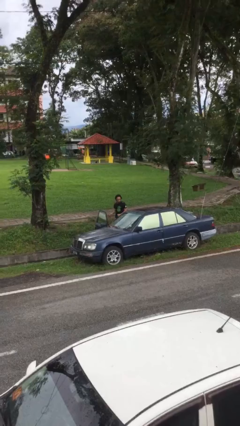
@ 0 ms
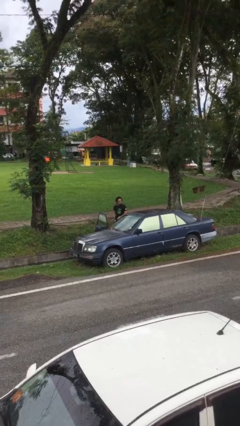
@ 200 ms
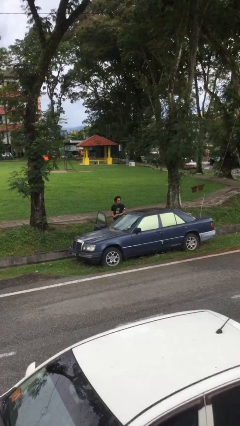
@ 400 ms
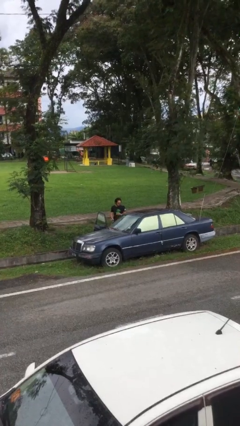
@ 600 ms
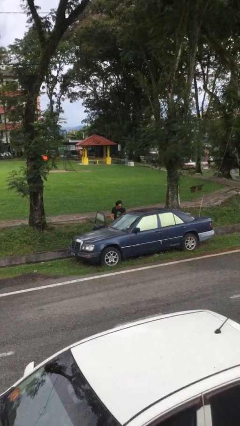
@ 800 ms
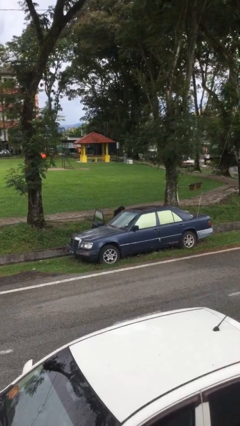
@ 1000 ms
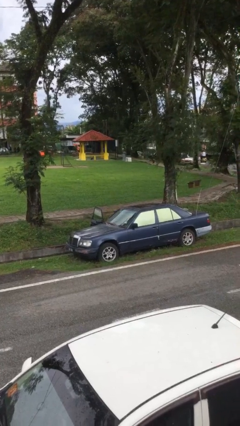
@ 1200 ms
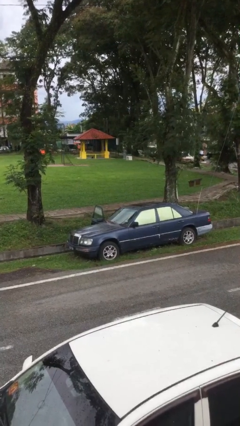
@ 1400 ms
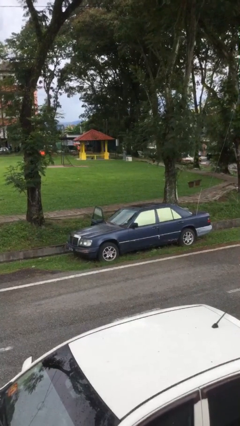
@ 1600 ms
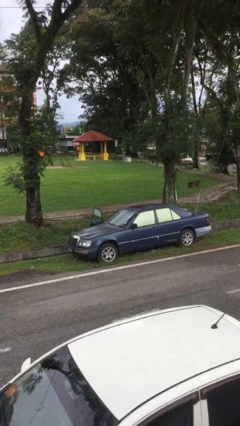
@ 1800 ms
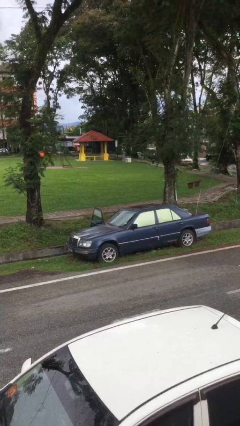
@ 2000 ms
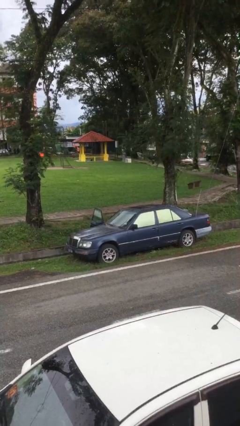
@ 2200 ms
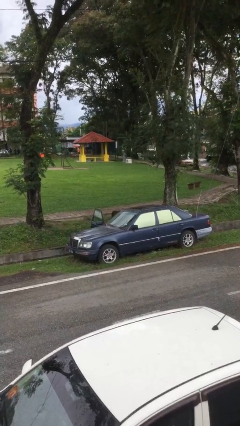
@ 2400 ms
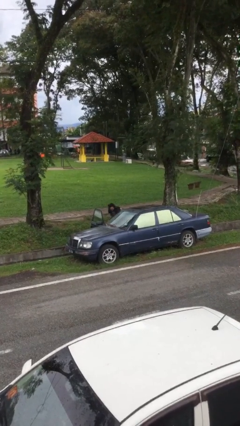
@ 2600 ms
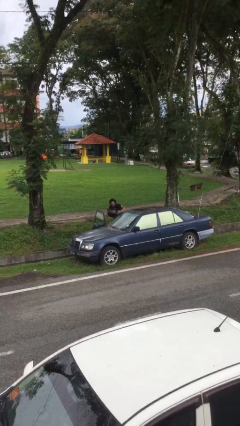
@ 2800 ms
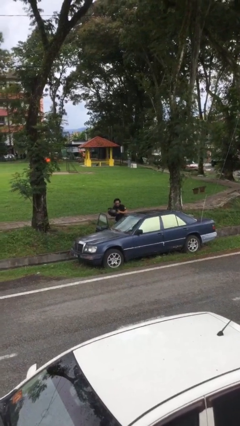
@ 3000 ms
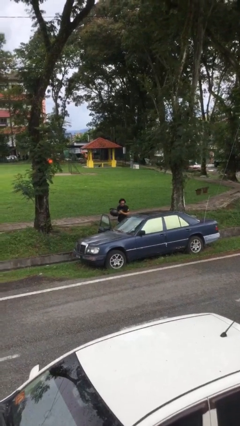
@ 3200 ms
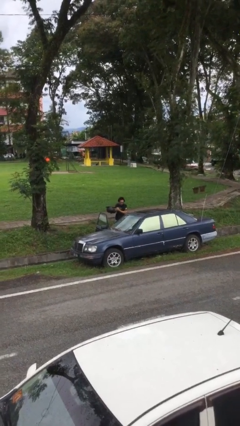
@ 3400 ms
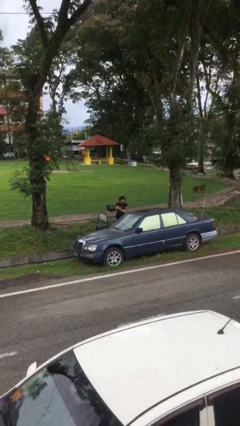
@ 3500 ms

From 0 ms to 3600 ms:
person unloads car

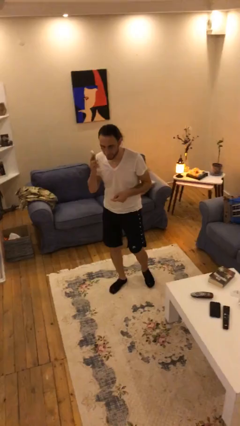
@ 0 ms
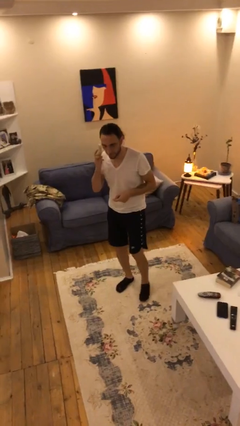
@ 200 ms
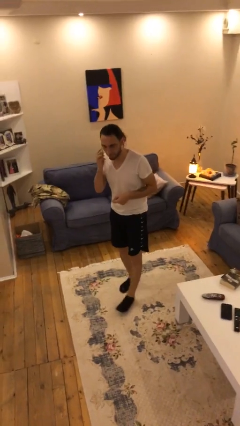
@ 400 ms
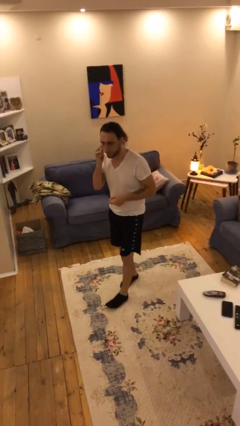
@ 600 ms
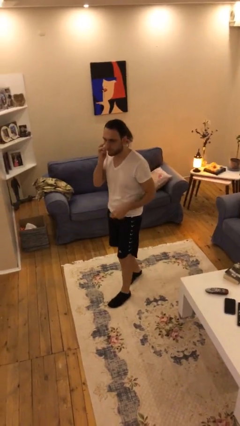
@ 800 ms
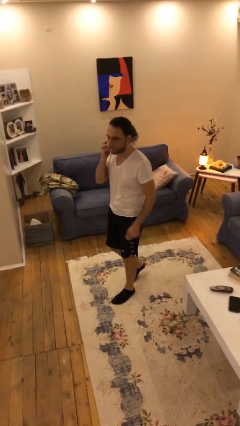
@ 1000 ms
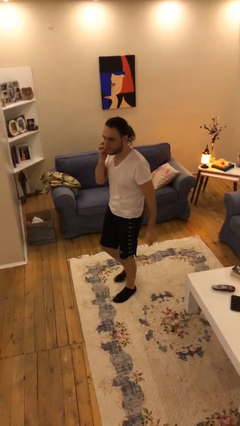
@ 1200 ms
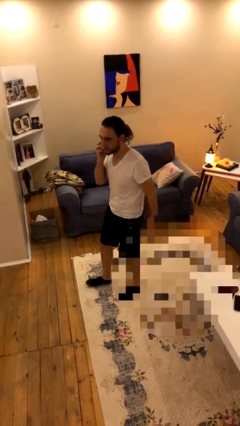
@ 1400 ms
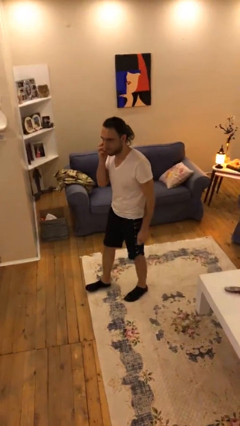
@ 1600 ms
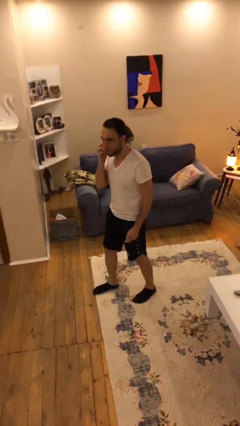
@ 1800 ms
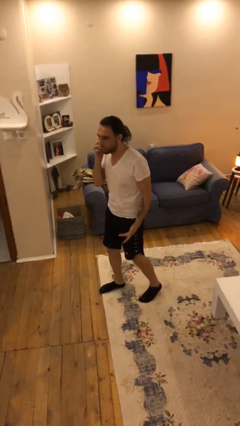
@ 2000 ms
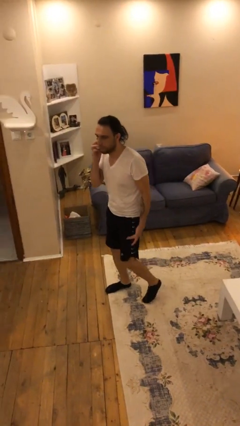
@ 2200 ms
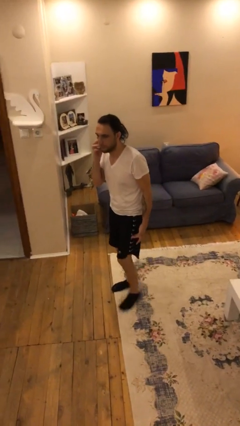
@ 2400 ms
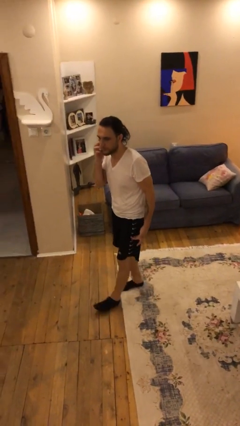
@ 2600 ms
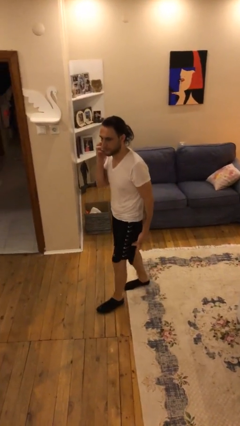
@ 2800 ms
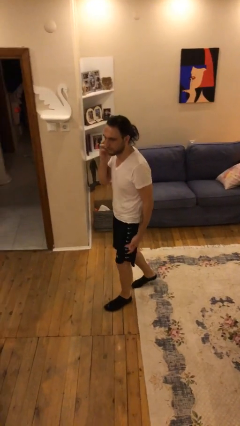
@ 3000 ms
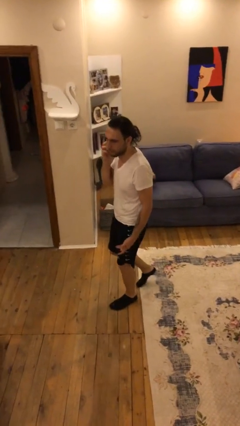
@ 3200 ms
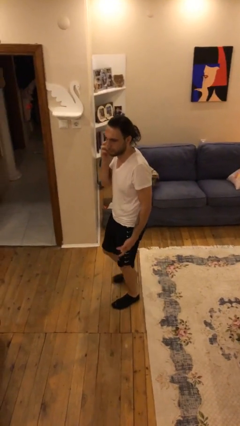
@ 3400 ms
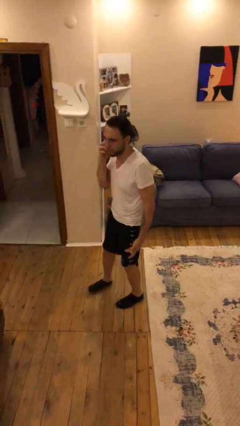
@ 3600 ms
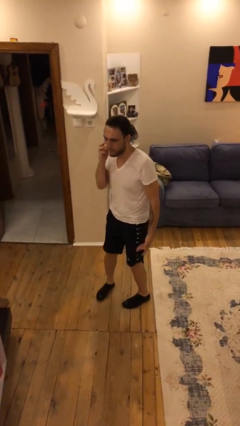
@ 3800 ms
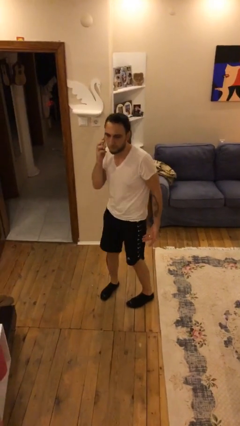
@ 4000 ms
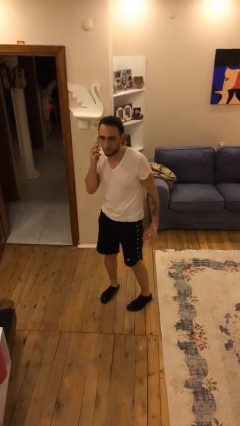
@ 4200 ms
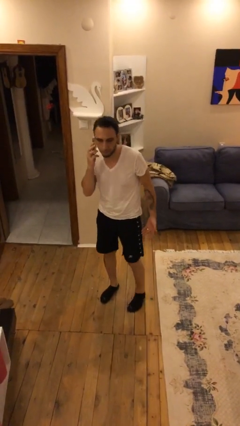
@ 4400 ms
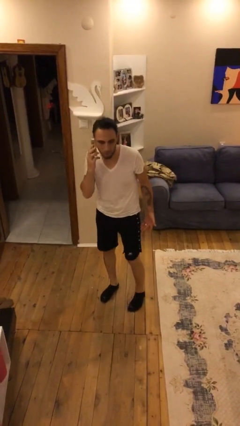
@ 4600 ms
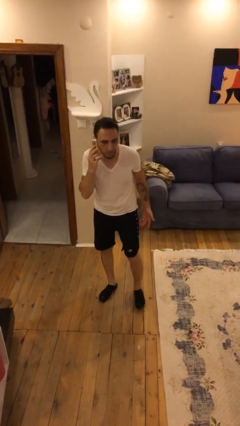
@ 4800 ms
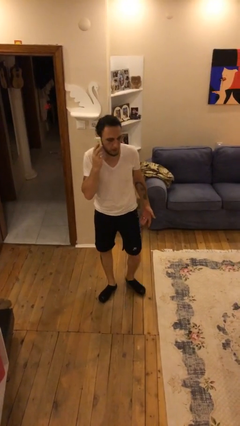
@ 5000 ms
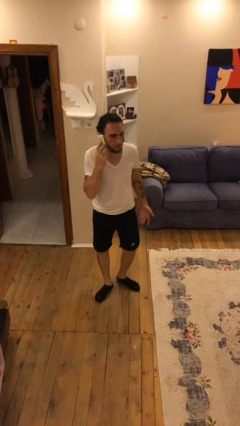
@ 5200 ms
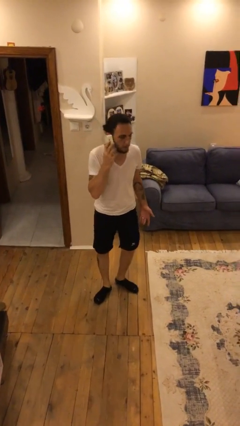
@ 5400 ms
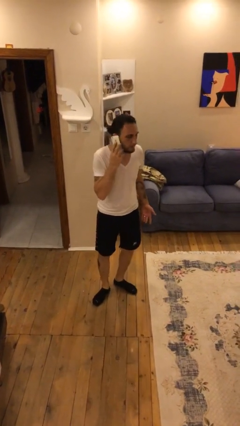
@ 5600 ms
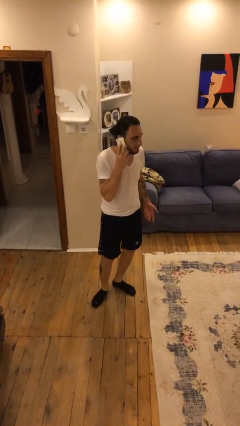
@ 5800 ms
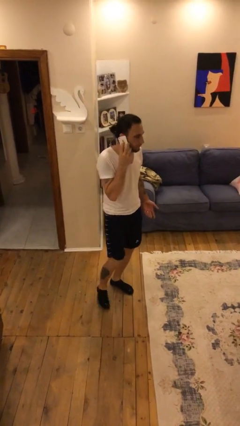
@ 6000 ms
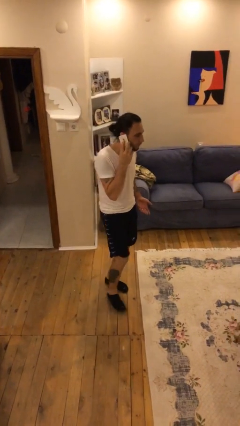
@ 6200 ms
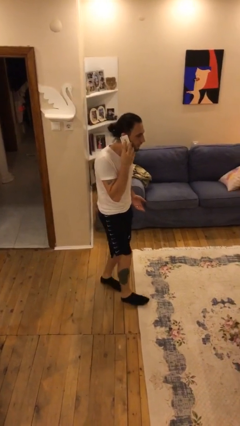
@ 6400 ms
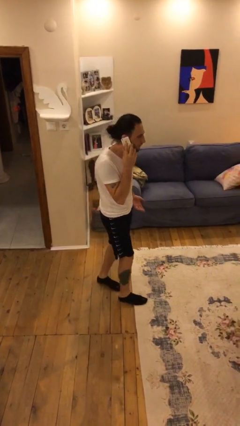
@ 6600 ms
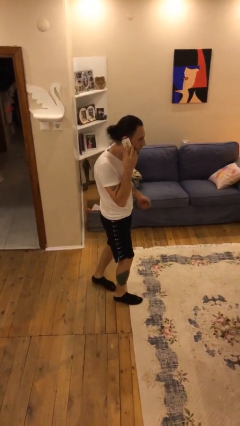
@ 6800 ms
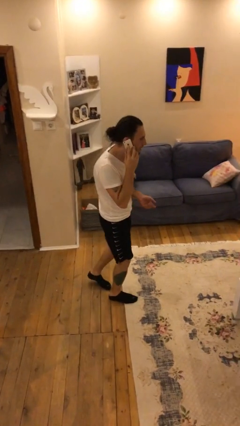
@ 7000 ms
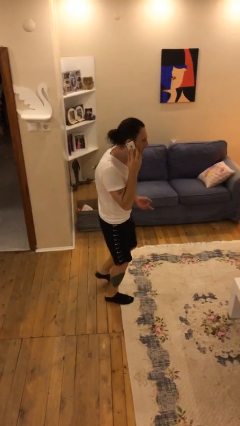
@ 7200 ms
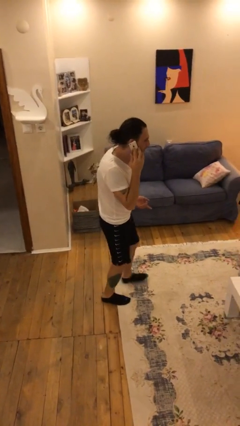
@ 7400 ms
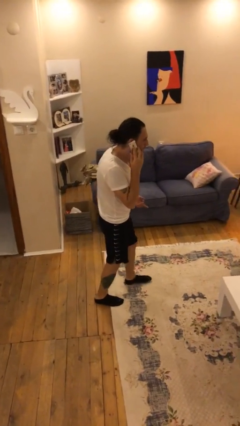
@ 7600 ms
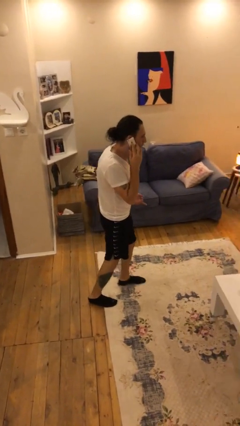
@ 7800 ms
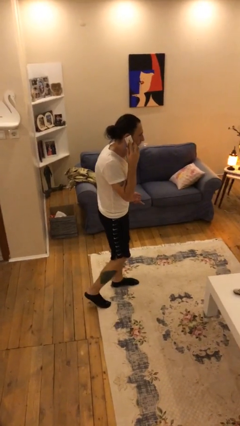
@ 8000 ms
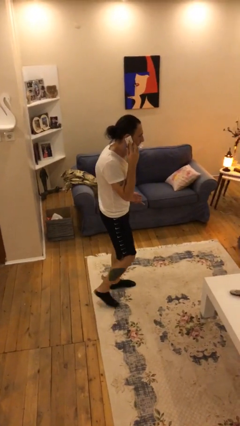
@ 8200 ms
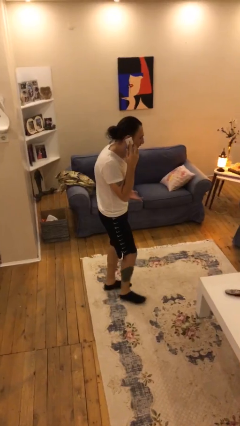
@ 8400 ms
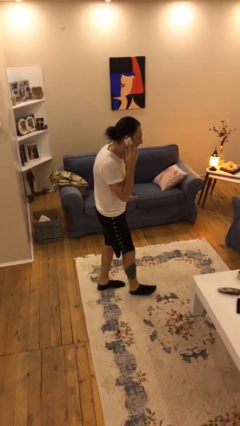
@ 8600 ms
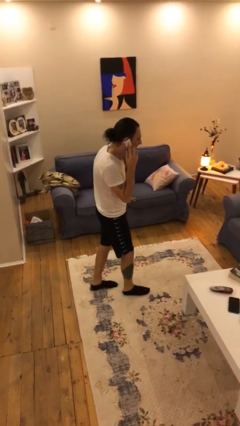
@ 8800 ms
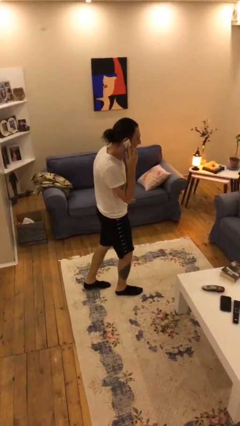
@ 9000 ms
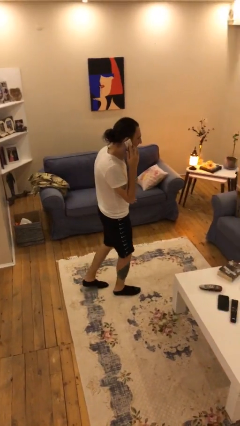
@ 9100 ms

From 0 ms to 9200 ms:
person talks on phone

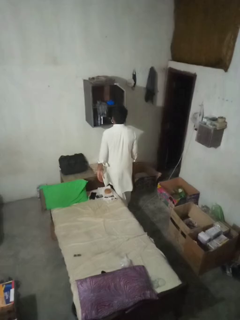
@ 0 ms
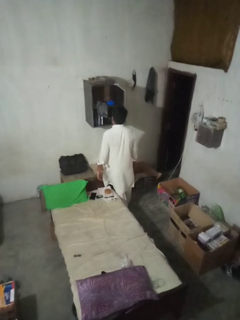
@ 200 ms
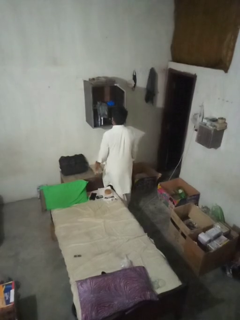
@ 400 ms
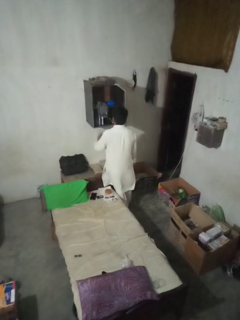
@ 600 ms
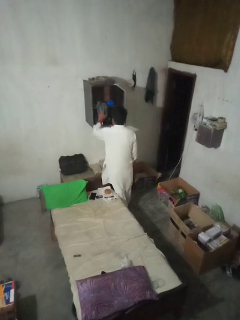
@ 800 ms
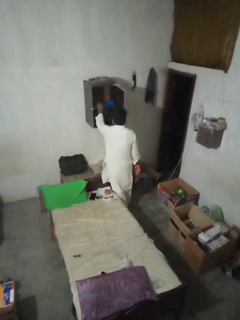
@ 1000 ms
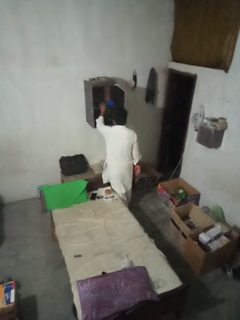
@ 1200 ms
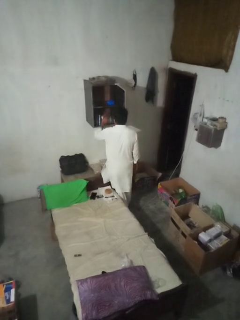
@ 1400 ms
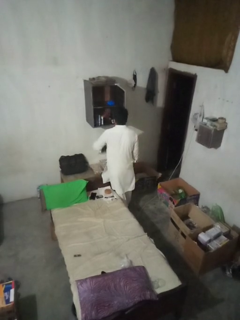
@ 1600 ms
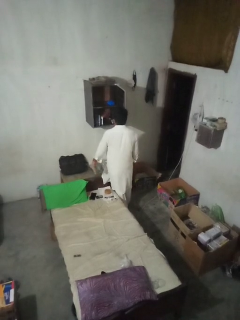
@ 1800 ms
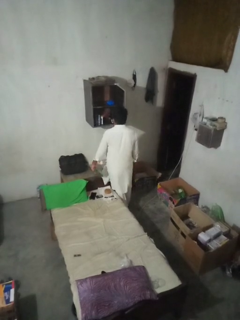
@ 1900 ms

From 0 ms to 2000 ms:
person takes clothes from dresser

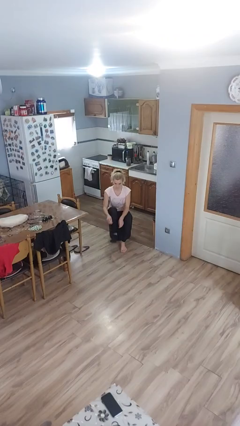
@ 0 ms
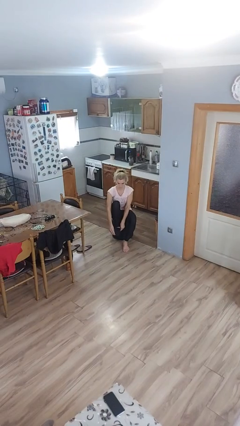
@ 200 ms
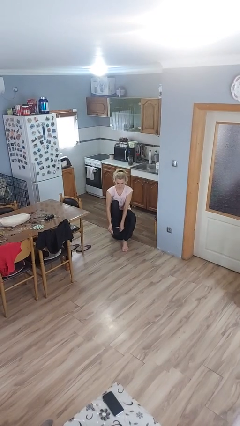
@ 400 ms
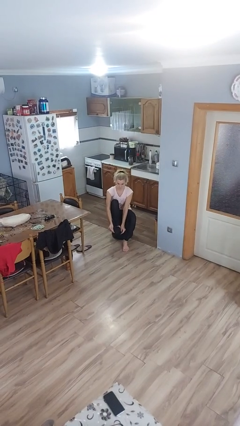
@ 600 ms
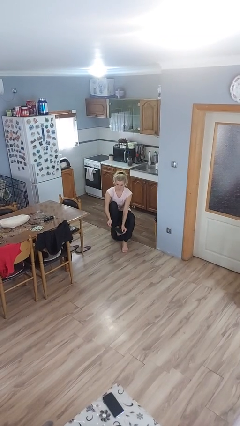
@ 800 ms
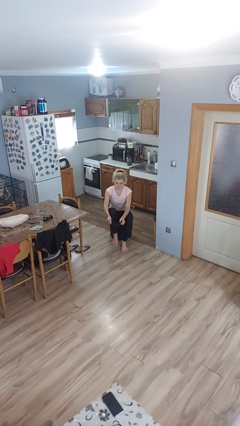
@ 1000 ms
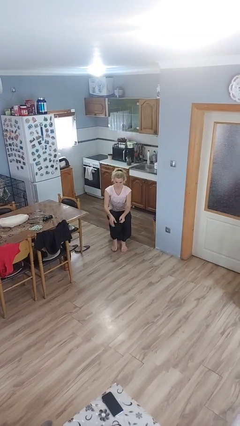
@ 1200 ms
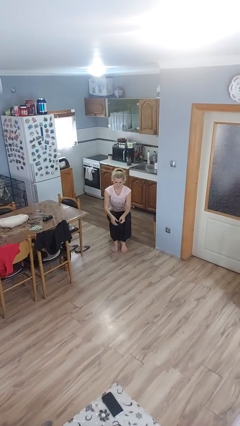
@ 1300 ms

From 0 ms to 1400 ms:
person takes off socks

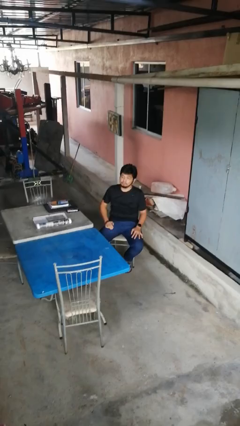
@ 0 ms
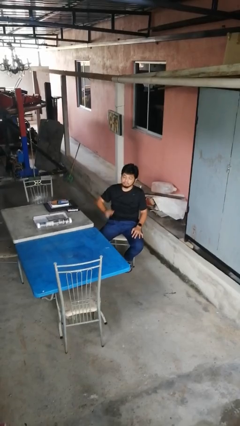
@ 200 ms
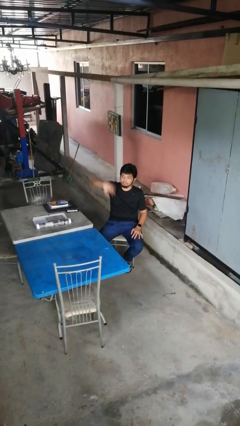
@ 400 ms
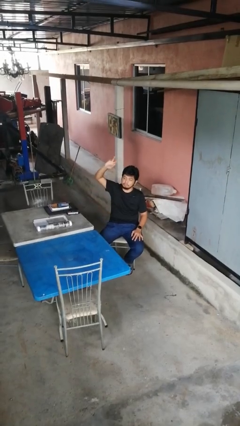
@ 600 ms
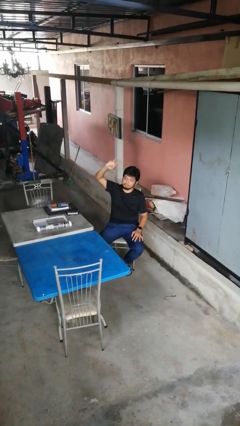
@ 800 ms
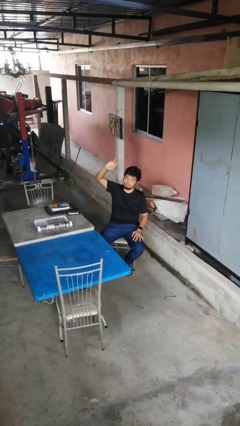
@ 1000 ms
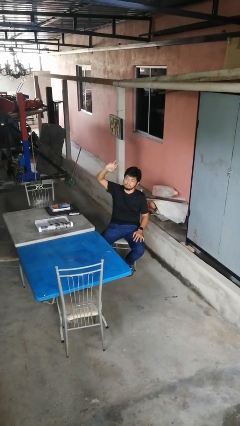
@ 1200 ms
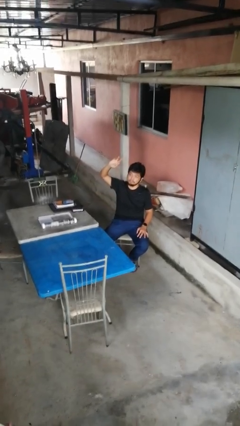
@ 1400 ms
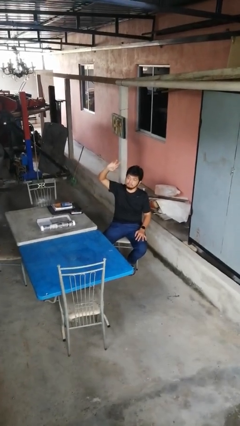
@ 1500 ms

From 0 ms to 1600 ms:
person gestures swipe up
